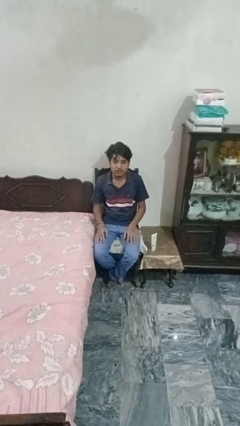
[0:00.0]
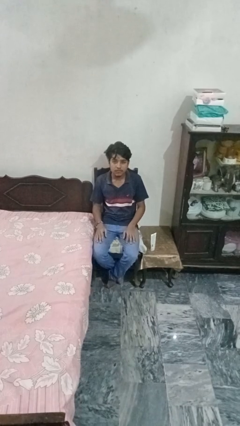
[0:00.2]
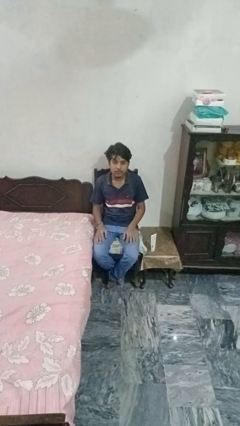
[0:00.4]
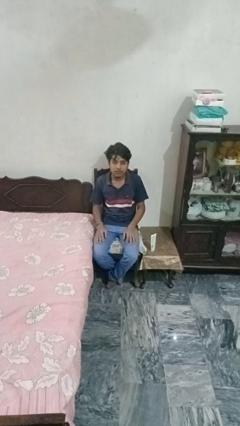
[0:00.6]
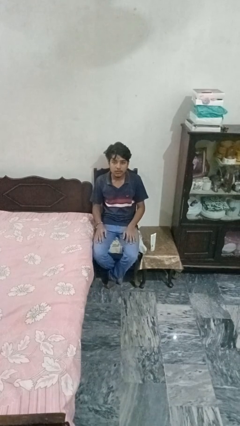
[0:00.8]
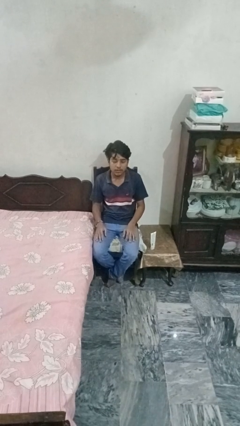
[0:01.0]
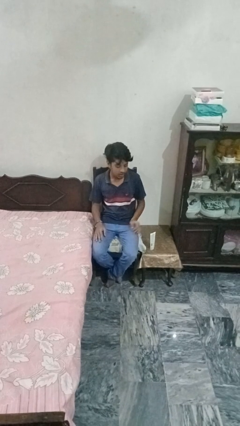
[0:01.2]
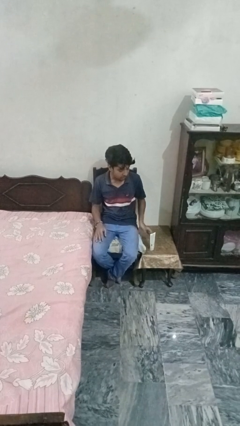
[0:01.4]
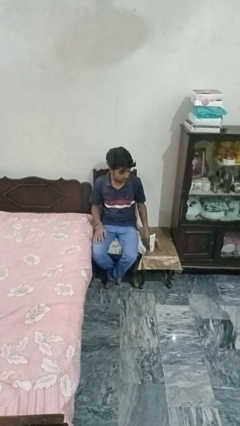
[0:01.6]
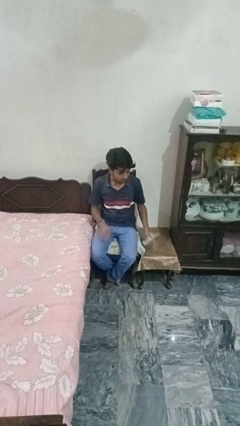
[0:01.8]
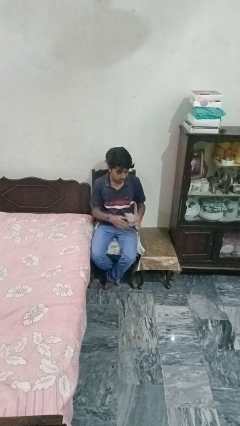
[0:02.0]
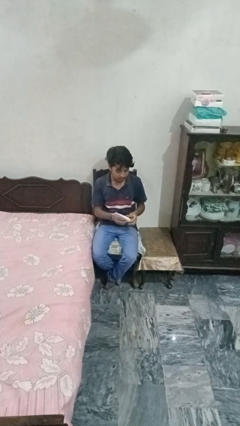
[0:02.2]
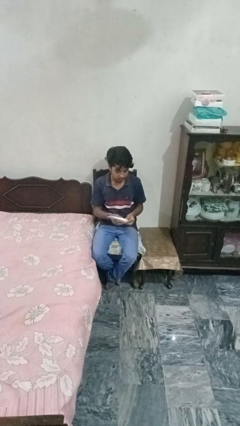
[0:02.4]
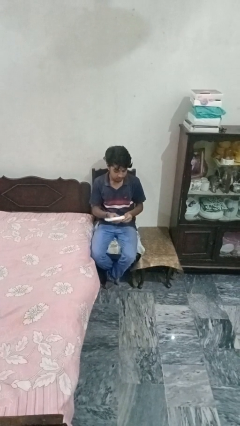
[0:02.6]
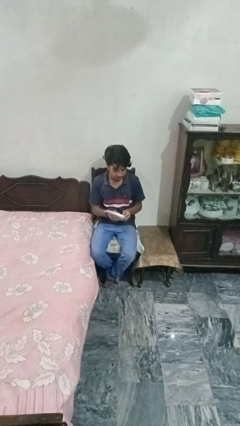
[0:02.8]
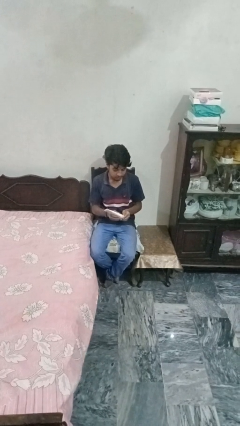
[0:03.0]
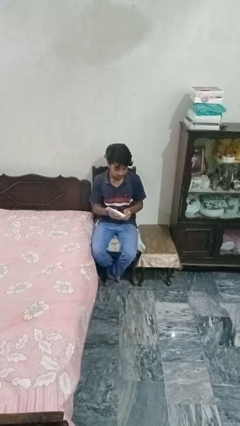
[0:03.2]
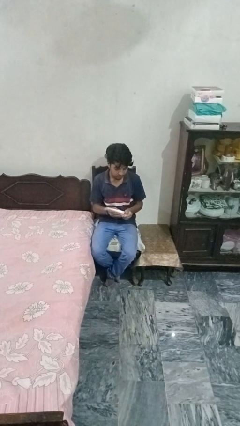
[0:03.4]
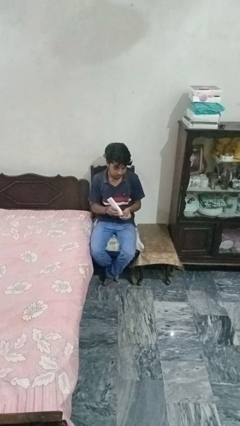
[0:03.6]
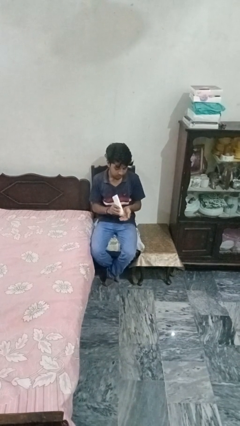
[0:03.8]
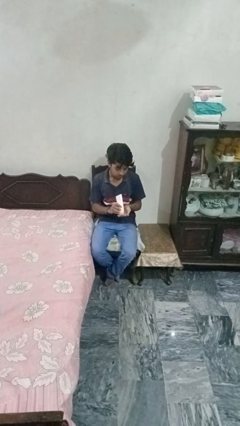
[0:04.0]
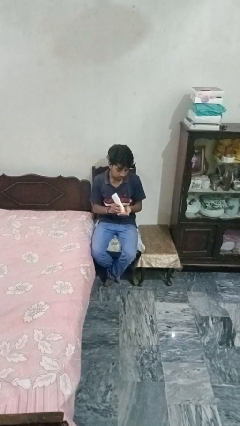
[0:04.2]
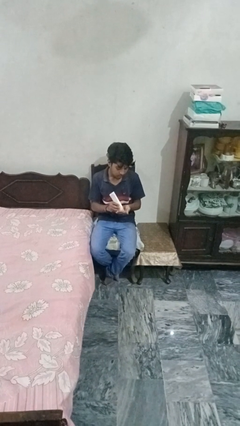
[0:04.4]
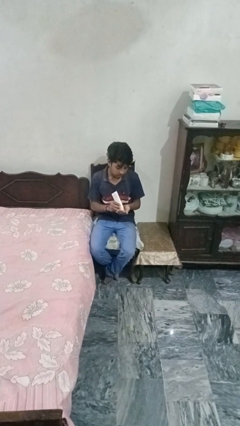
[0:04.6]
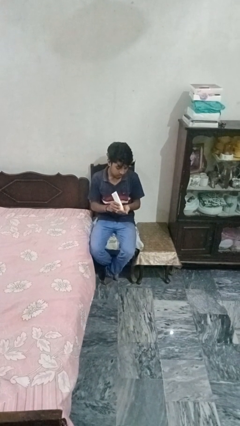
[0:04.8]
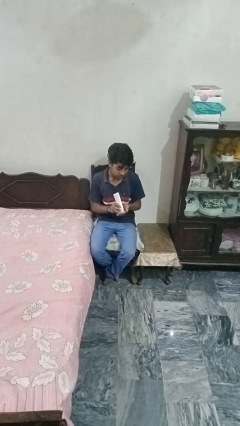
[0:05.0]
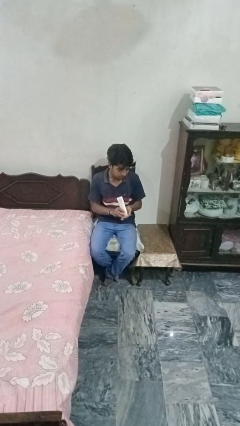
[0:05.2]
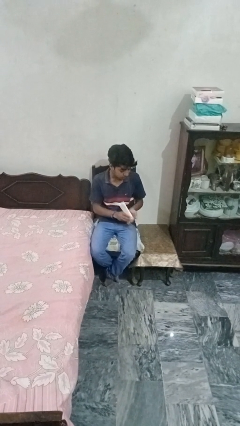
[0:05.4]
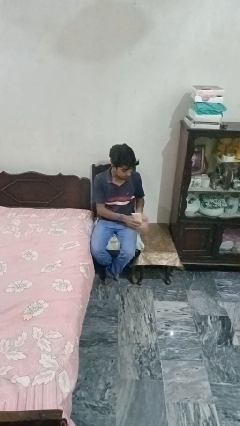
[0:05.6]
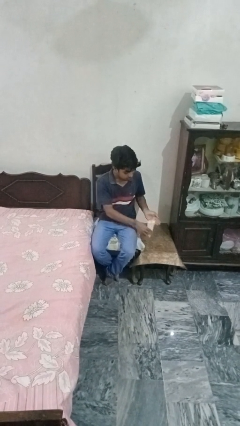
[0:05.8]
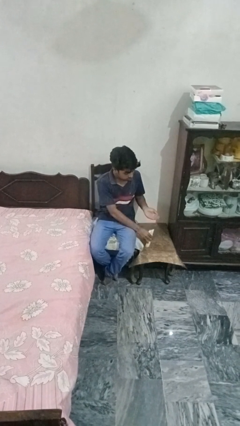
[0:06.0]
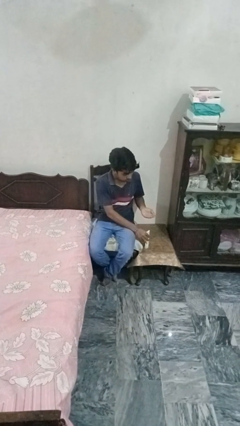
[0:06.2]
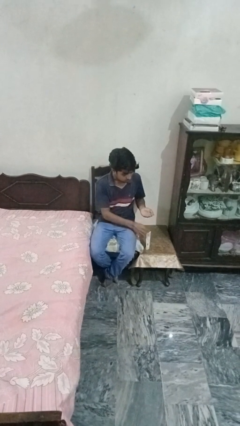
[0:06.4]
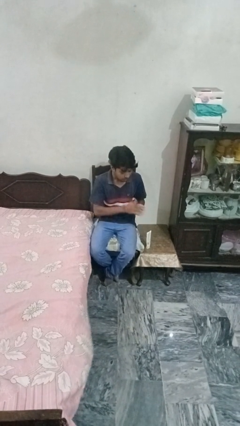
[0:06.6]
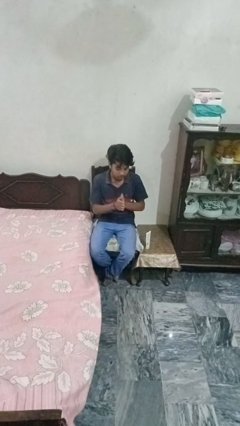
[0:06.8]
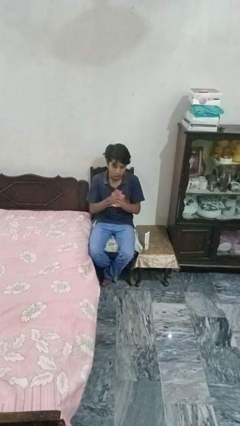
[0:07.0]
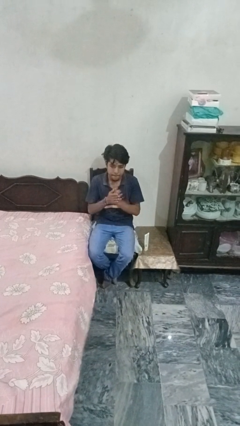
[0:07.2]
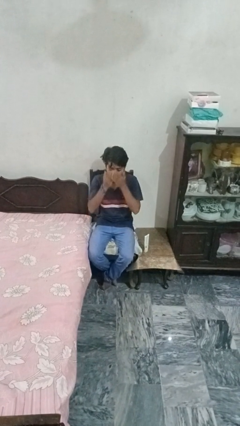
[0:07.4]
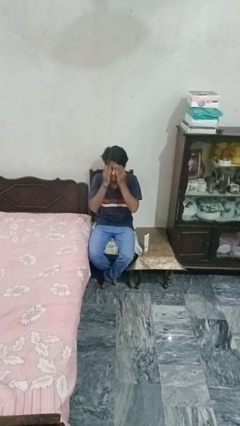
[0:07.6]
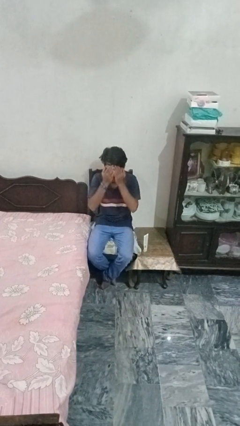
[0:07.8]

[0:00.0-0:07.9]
person applies facial moisturizer

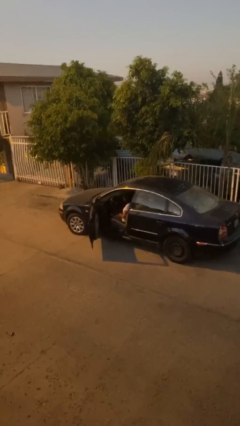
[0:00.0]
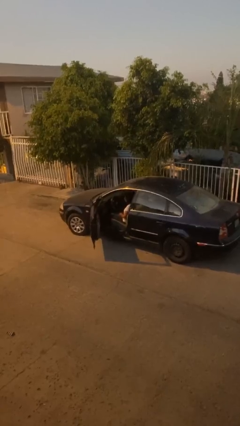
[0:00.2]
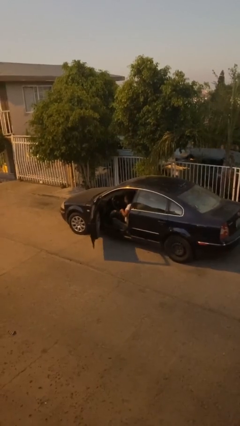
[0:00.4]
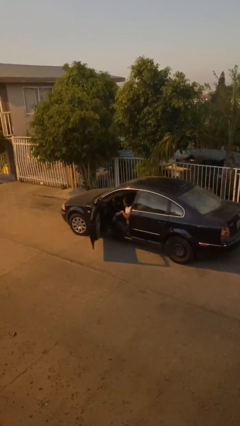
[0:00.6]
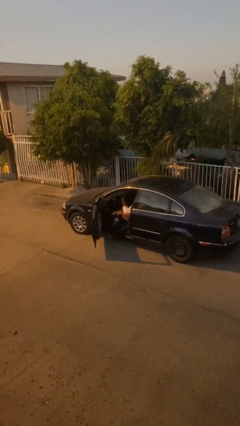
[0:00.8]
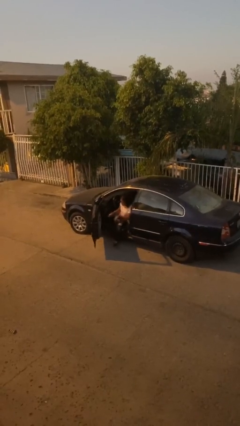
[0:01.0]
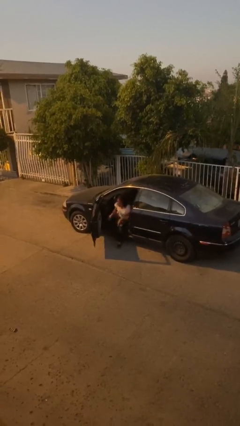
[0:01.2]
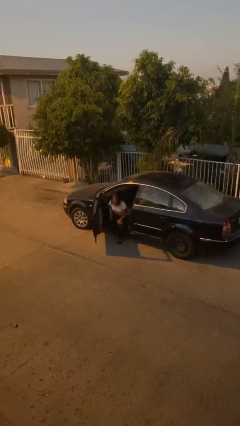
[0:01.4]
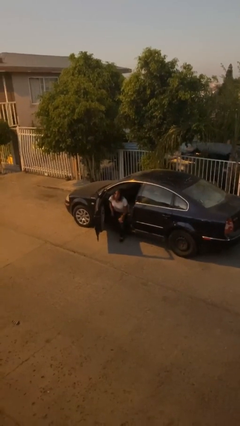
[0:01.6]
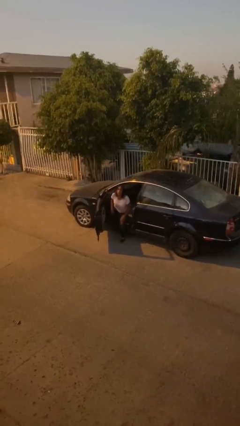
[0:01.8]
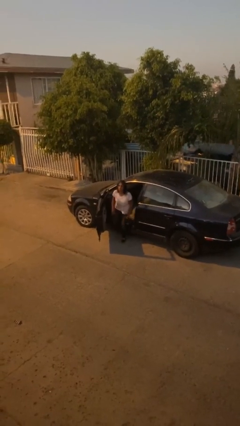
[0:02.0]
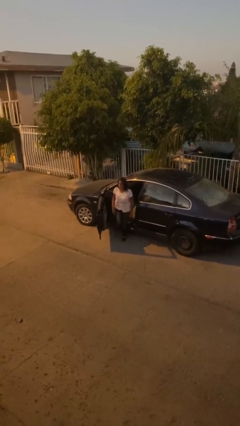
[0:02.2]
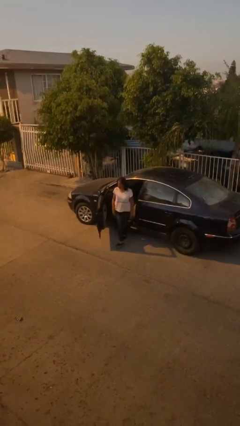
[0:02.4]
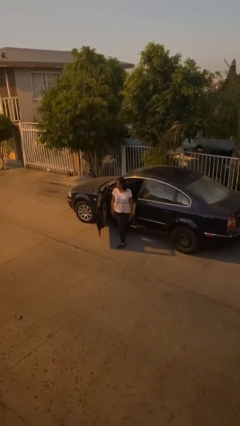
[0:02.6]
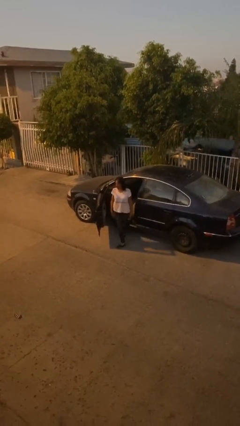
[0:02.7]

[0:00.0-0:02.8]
person exits car

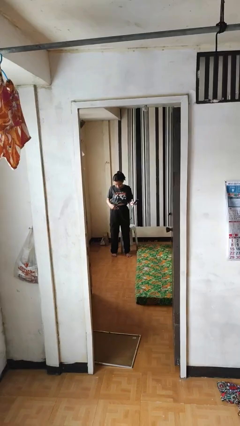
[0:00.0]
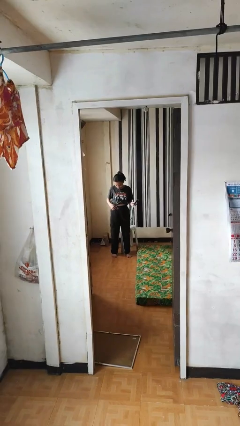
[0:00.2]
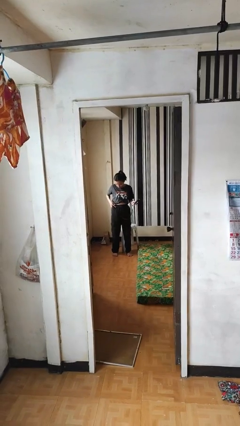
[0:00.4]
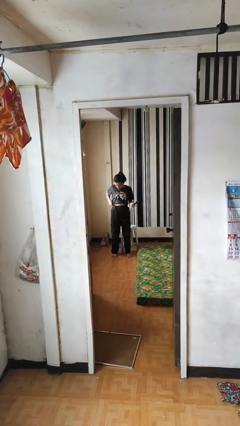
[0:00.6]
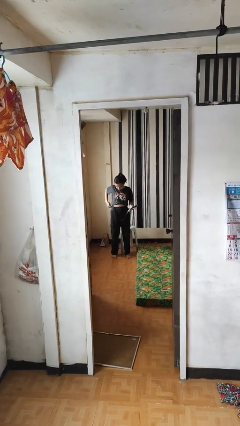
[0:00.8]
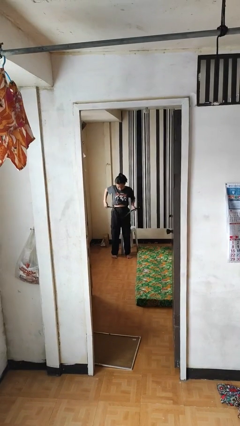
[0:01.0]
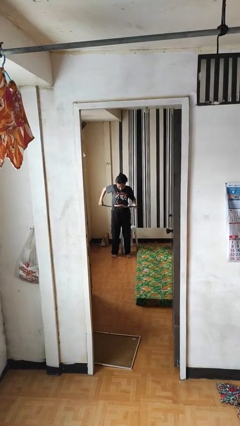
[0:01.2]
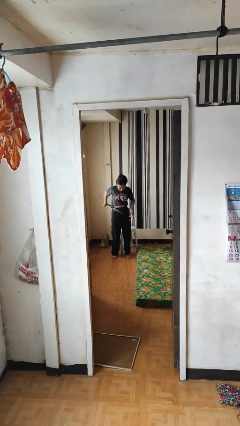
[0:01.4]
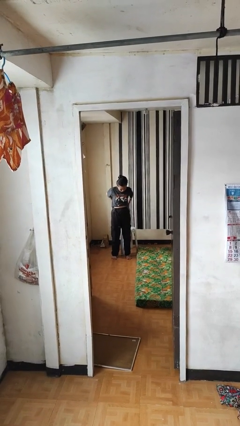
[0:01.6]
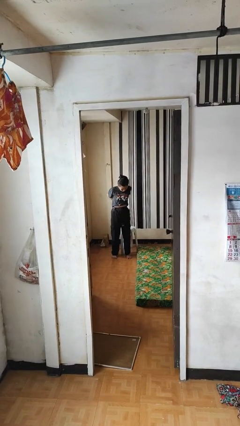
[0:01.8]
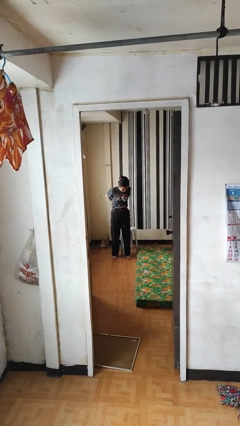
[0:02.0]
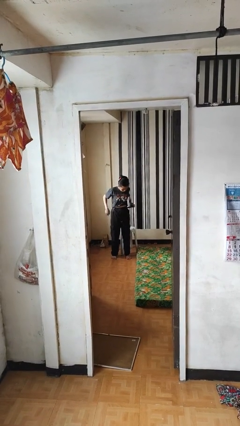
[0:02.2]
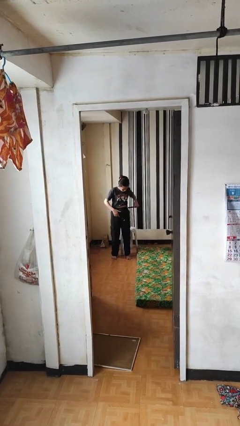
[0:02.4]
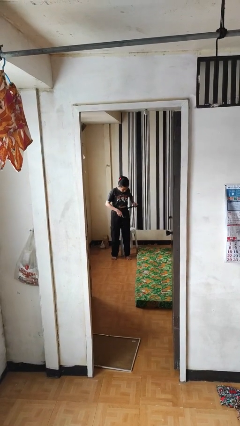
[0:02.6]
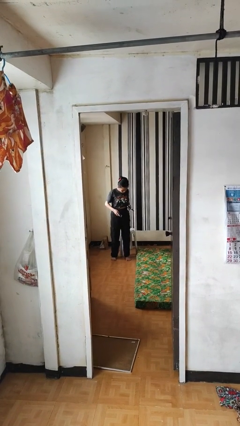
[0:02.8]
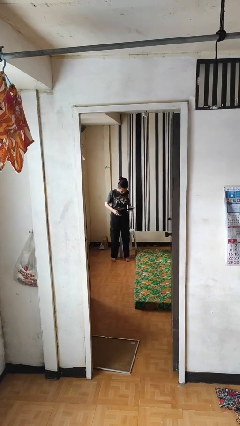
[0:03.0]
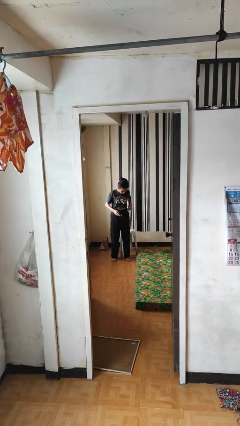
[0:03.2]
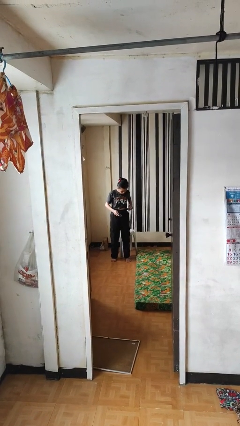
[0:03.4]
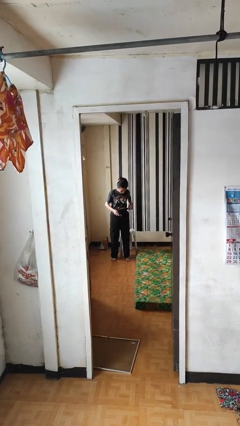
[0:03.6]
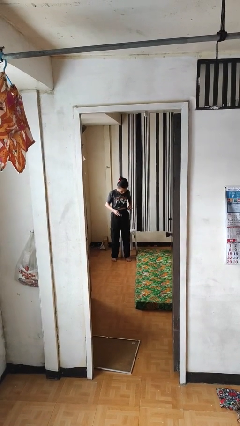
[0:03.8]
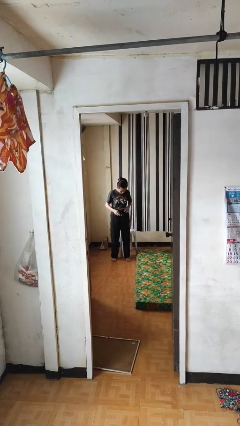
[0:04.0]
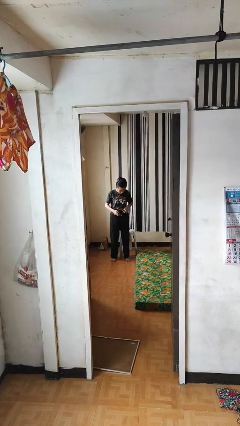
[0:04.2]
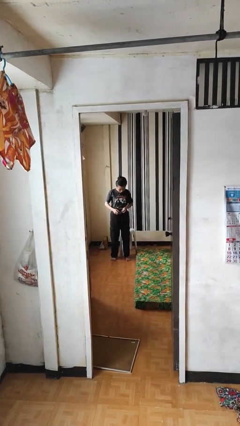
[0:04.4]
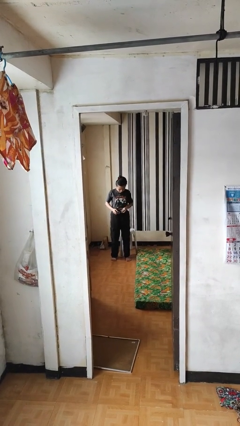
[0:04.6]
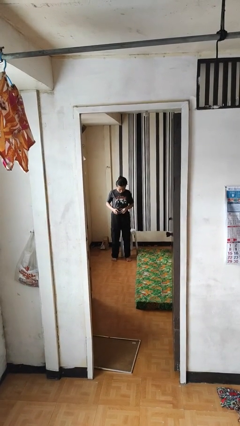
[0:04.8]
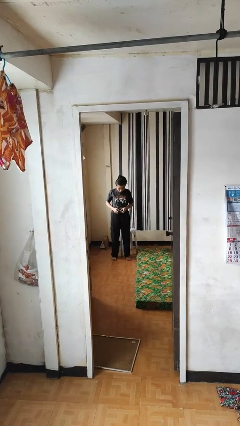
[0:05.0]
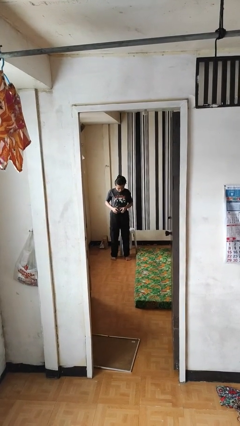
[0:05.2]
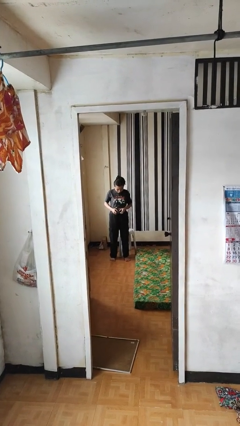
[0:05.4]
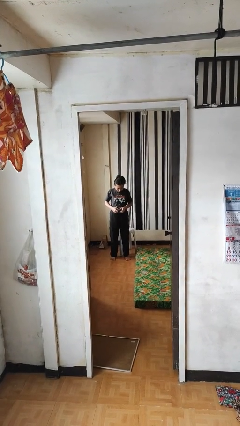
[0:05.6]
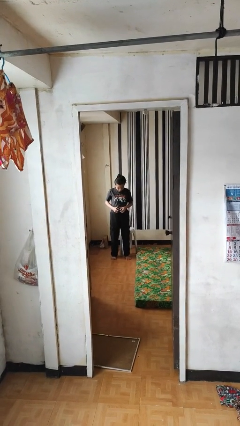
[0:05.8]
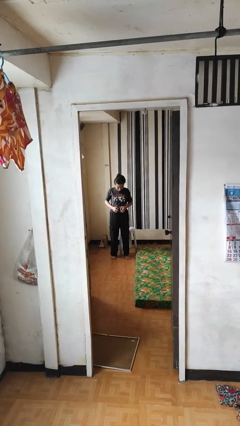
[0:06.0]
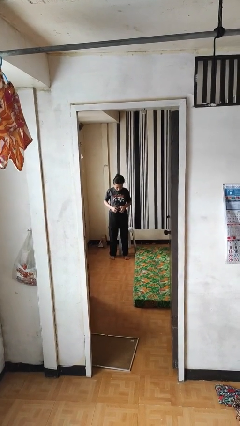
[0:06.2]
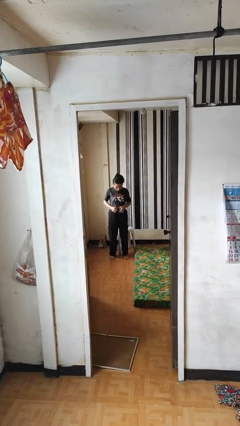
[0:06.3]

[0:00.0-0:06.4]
person puts on belt

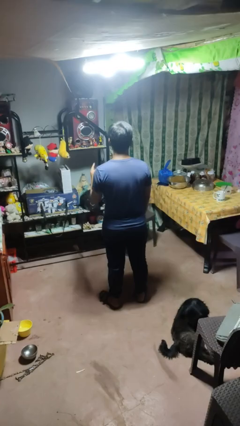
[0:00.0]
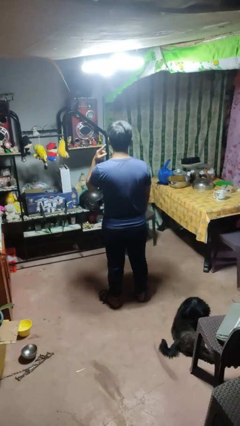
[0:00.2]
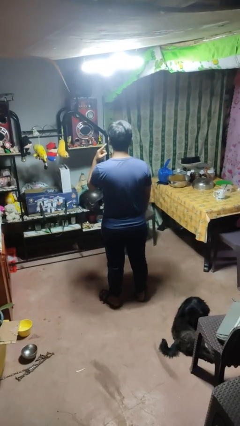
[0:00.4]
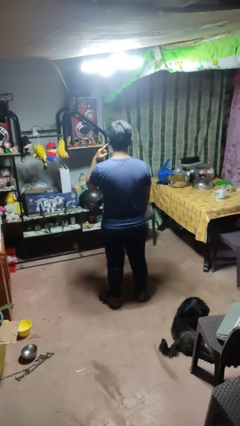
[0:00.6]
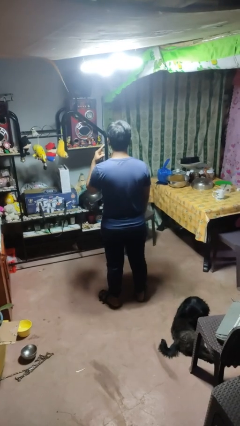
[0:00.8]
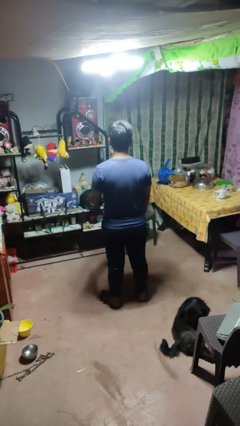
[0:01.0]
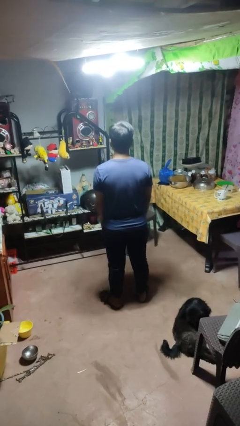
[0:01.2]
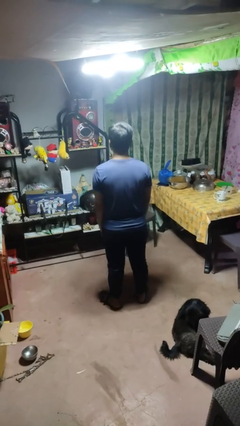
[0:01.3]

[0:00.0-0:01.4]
person gestures listen closely
